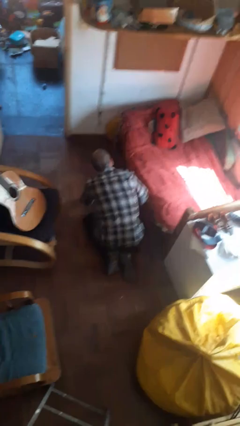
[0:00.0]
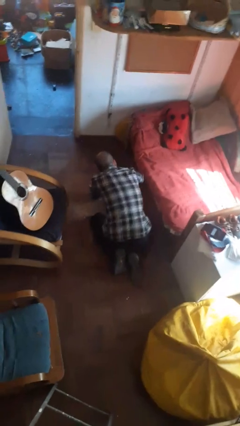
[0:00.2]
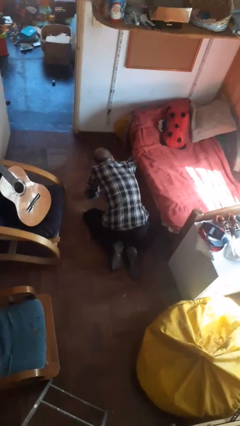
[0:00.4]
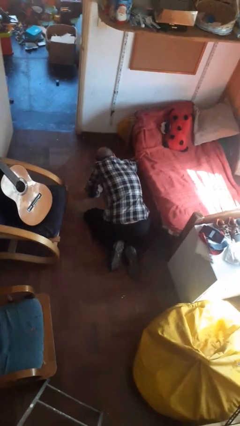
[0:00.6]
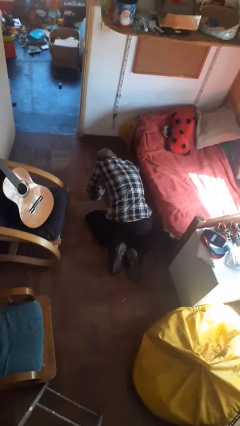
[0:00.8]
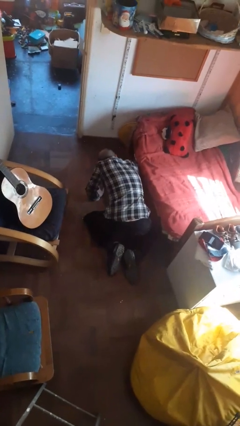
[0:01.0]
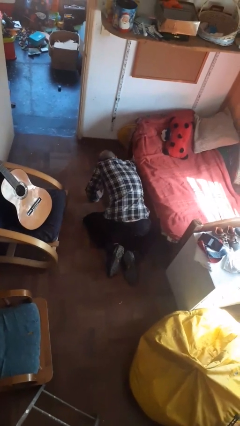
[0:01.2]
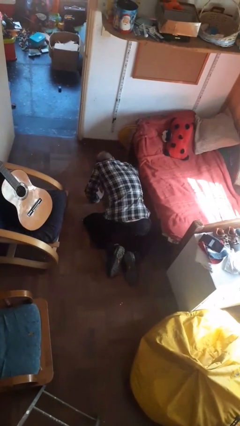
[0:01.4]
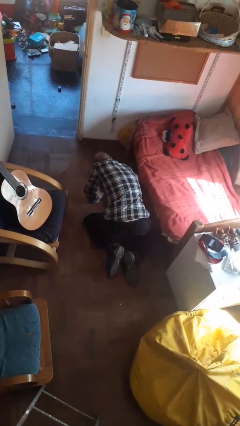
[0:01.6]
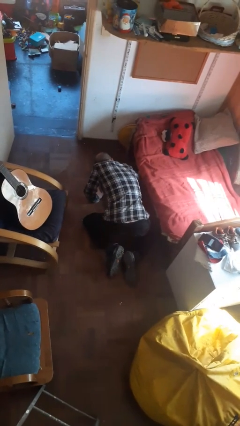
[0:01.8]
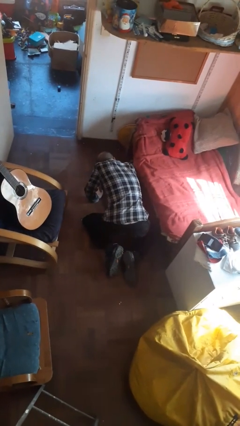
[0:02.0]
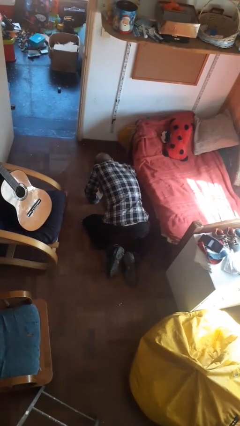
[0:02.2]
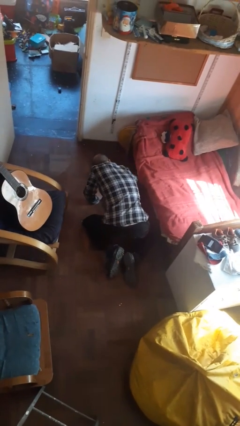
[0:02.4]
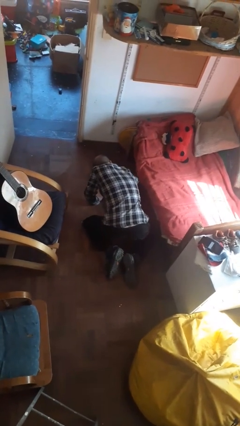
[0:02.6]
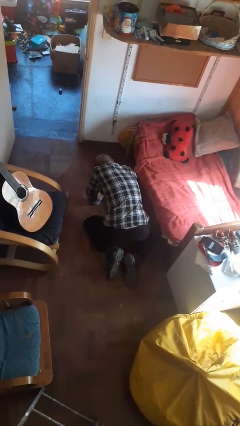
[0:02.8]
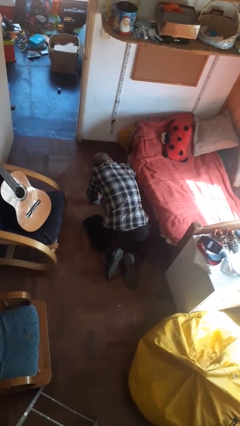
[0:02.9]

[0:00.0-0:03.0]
person searches under bed

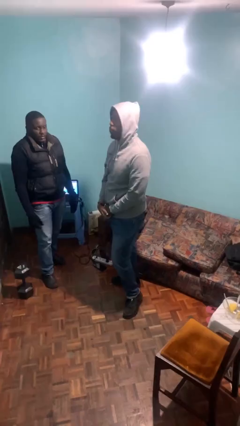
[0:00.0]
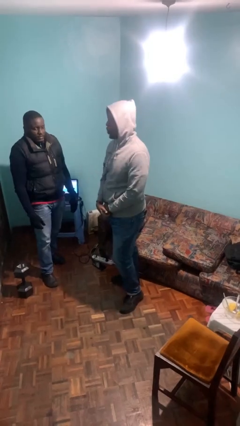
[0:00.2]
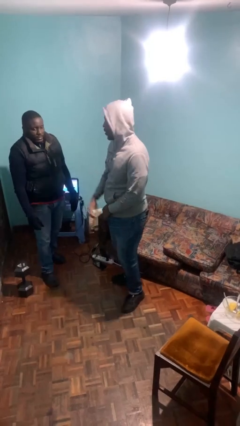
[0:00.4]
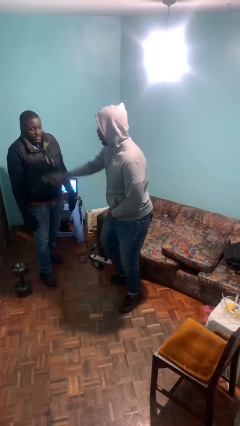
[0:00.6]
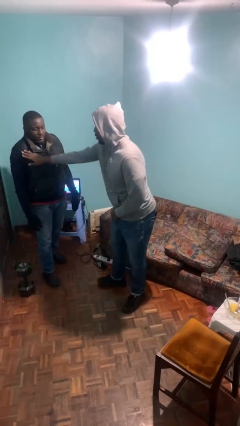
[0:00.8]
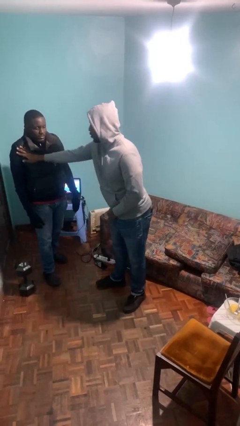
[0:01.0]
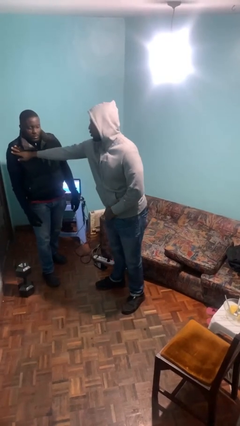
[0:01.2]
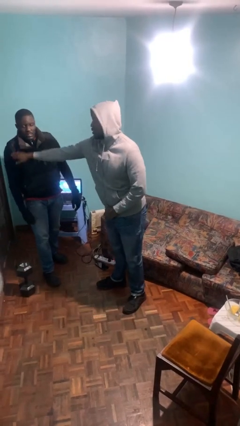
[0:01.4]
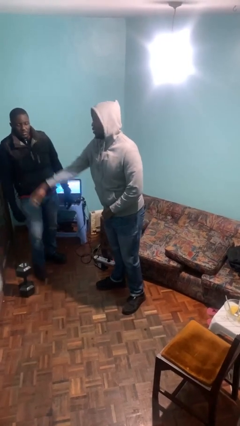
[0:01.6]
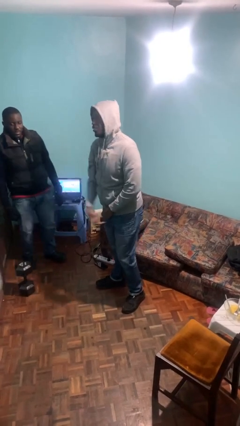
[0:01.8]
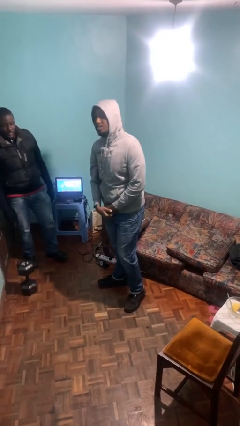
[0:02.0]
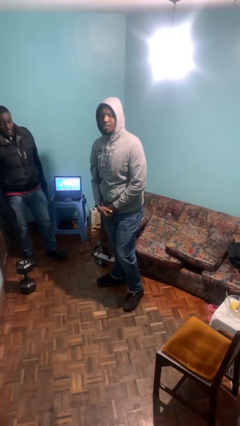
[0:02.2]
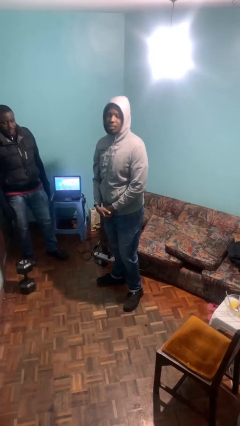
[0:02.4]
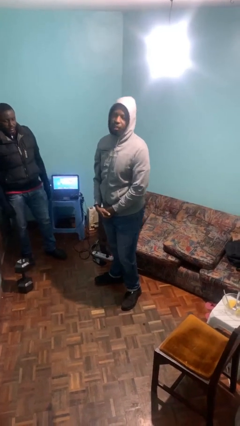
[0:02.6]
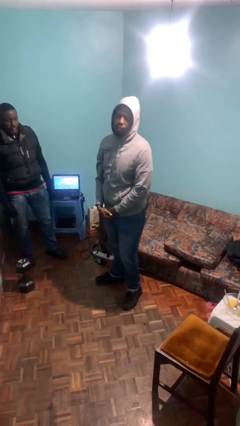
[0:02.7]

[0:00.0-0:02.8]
person shoves person

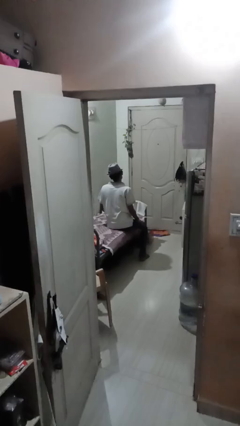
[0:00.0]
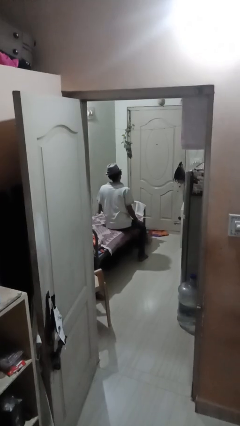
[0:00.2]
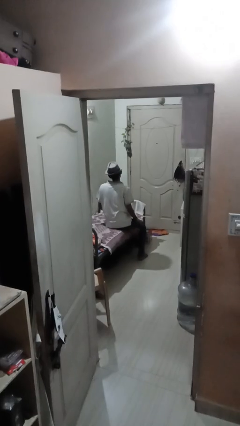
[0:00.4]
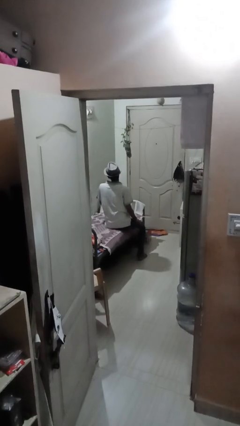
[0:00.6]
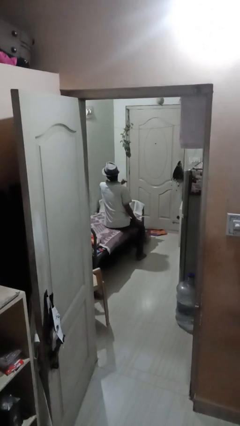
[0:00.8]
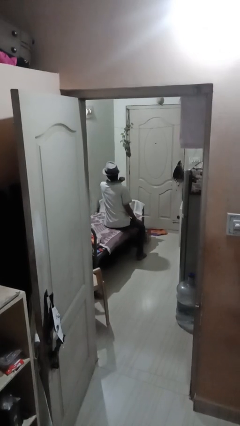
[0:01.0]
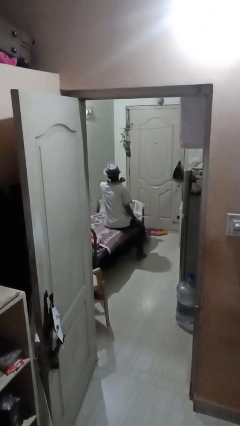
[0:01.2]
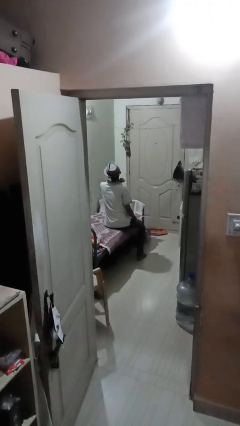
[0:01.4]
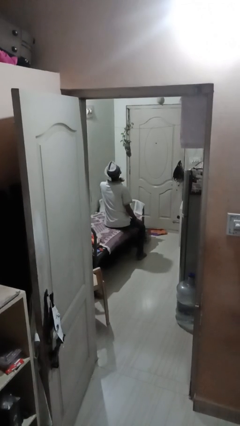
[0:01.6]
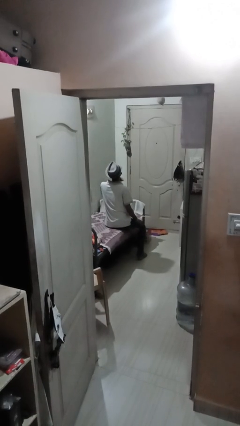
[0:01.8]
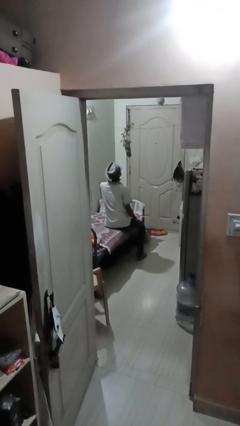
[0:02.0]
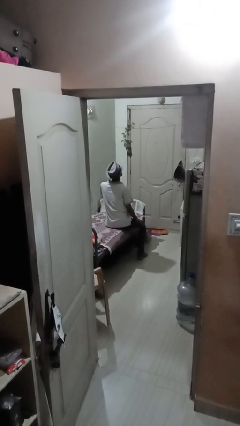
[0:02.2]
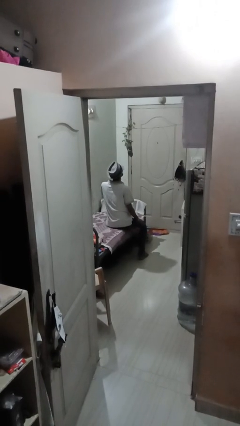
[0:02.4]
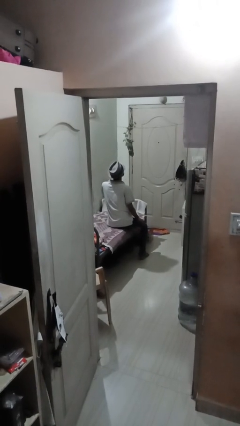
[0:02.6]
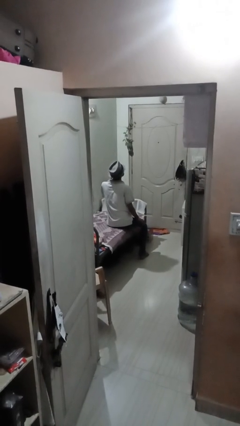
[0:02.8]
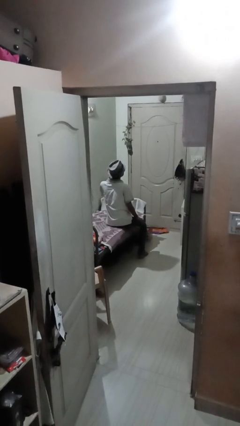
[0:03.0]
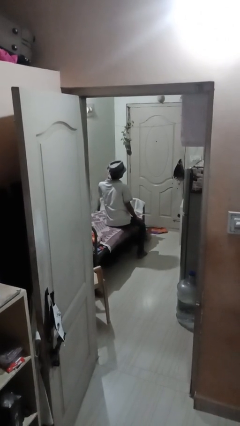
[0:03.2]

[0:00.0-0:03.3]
person gestures cut

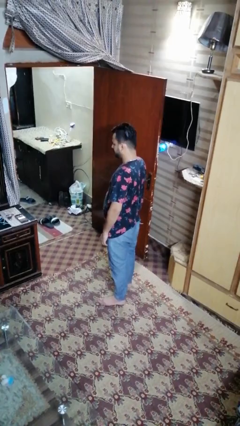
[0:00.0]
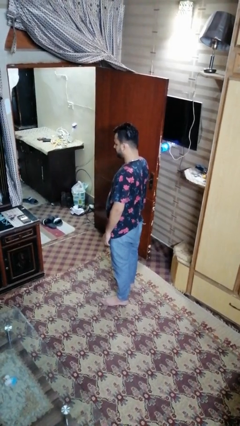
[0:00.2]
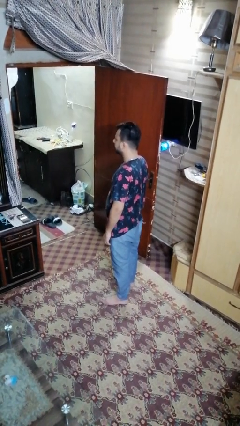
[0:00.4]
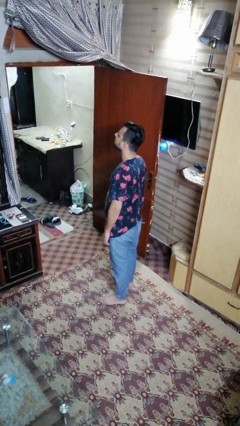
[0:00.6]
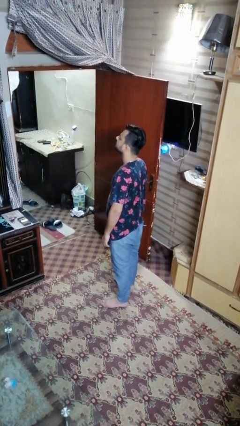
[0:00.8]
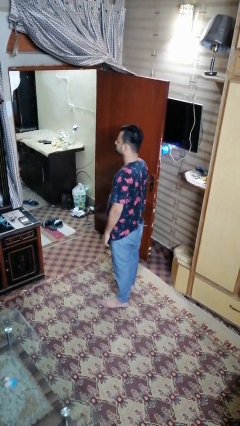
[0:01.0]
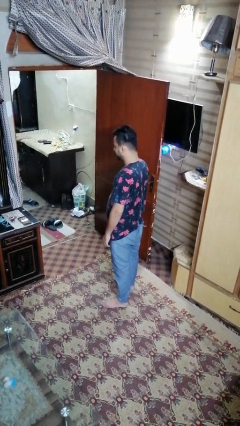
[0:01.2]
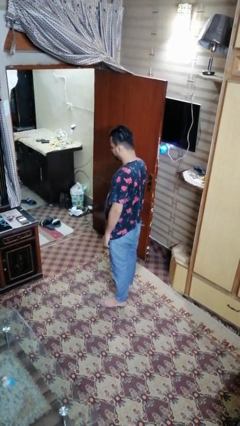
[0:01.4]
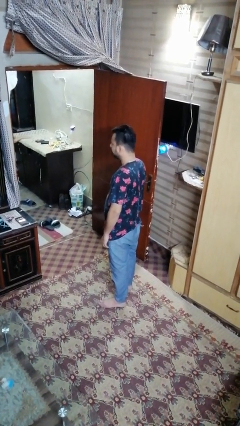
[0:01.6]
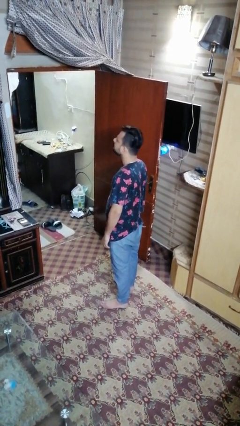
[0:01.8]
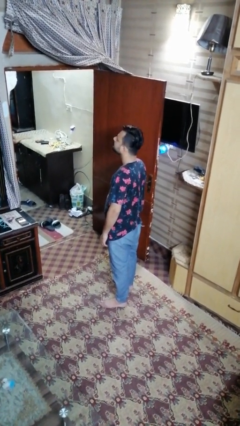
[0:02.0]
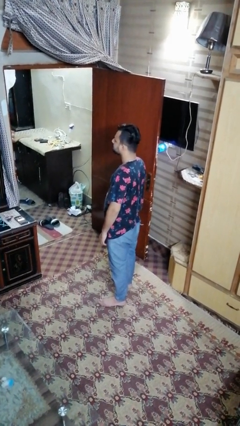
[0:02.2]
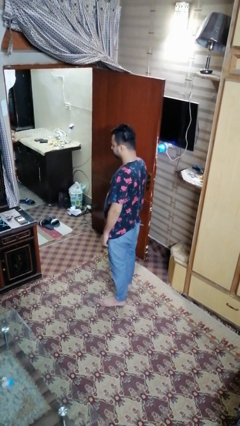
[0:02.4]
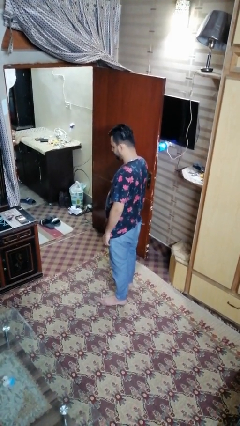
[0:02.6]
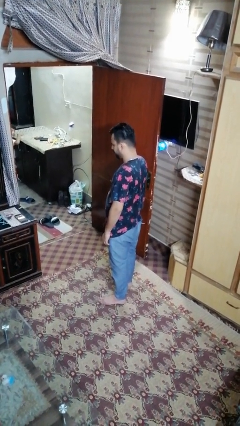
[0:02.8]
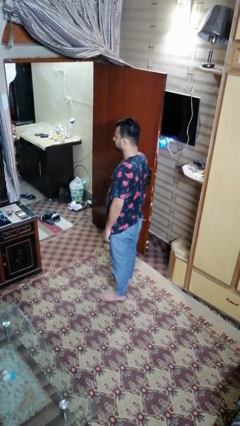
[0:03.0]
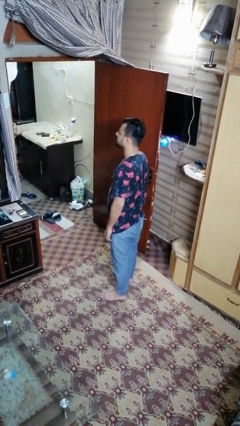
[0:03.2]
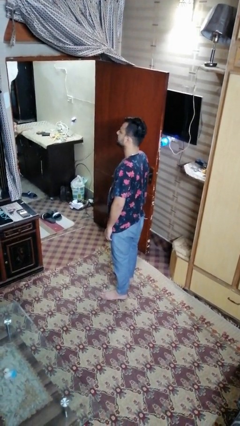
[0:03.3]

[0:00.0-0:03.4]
person nods head

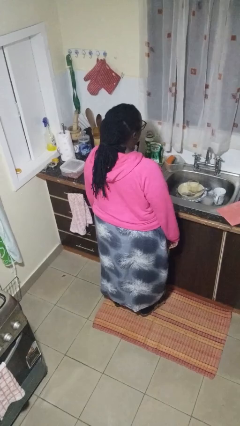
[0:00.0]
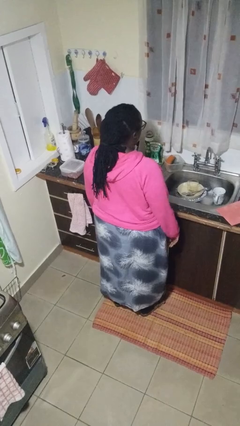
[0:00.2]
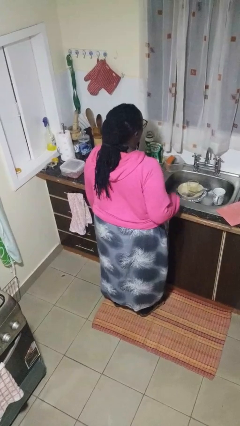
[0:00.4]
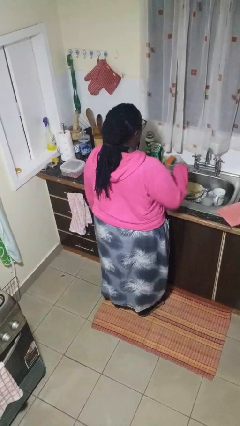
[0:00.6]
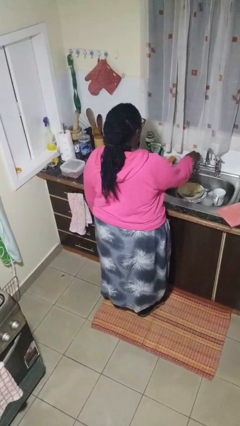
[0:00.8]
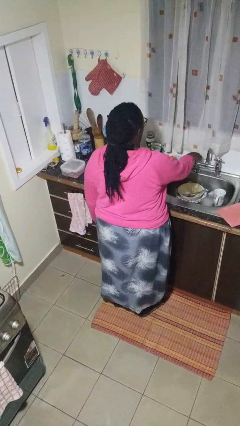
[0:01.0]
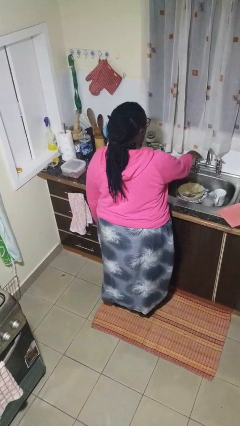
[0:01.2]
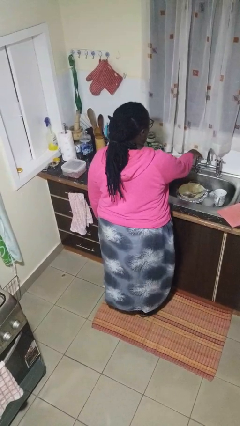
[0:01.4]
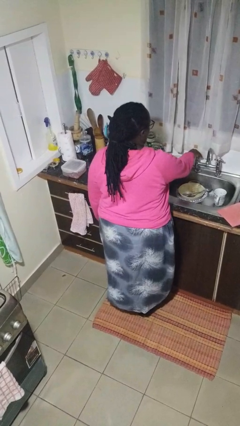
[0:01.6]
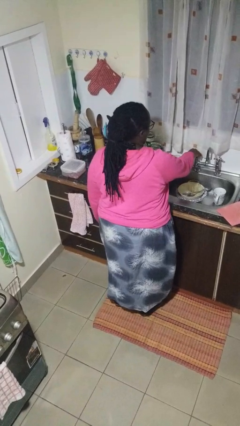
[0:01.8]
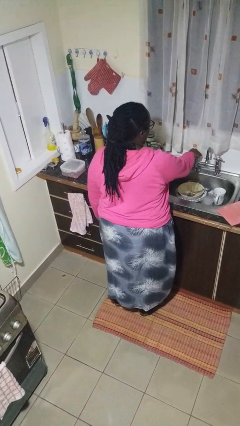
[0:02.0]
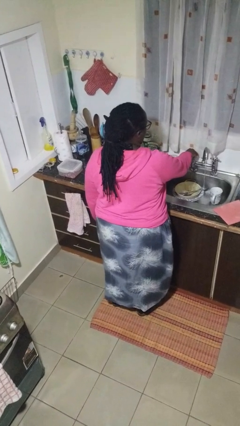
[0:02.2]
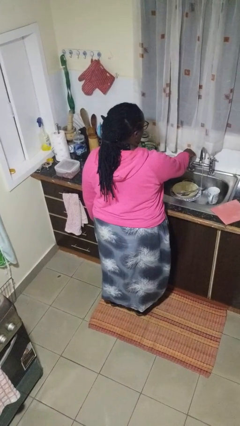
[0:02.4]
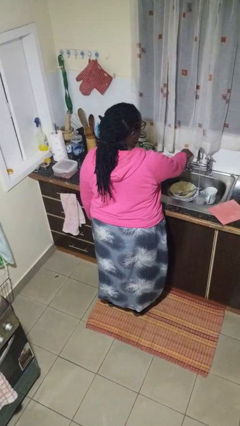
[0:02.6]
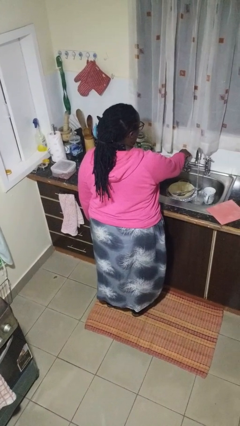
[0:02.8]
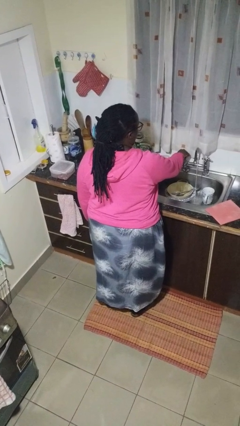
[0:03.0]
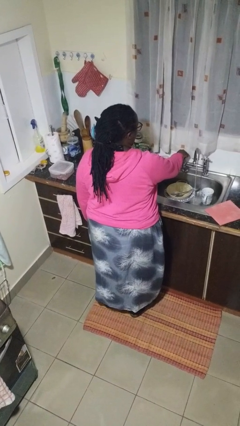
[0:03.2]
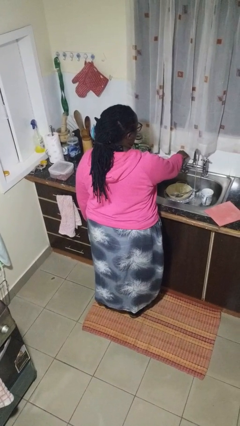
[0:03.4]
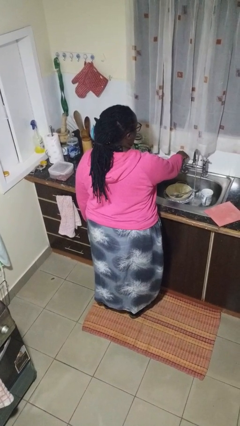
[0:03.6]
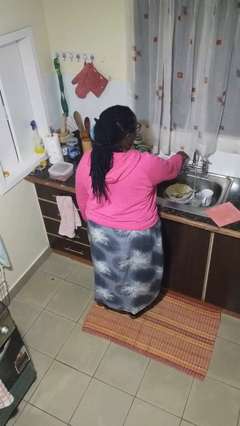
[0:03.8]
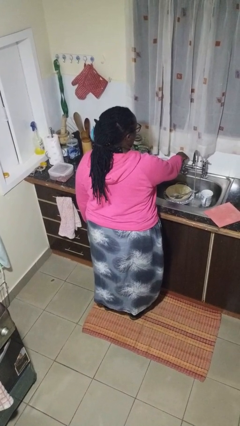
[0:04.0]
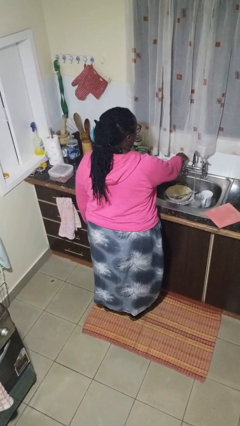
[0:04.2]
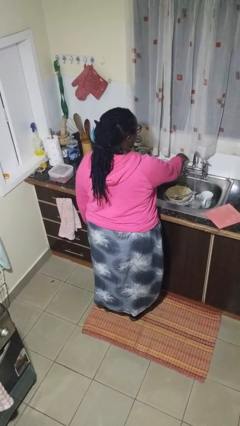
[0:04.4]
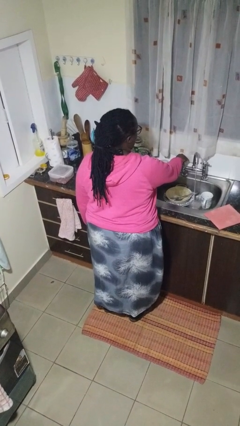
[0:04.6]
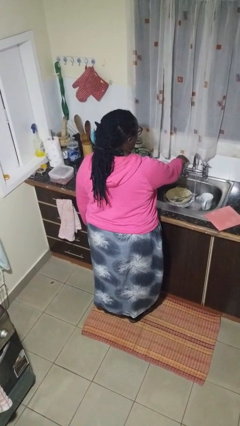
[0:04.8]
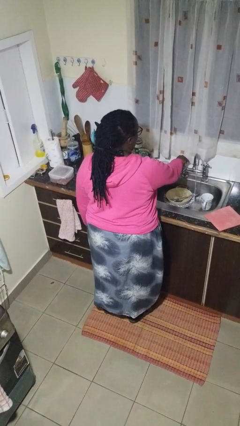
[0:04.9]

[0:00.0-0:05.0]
person turns on faucet
